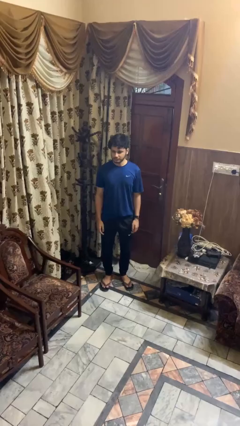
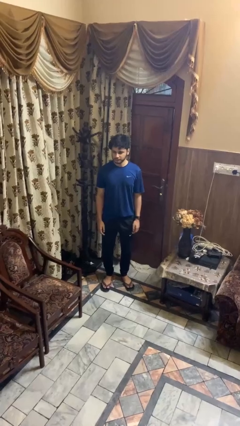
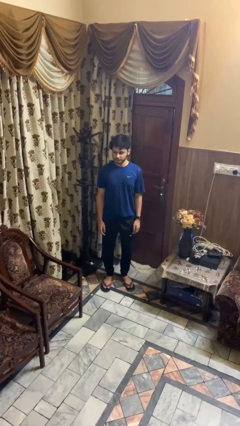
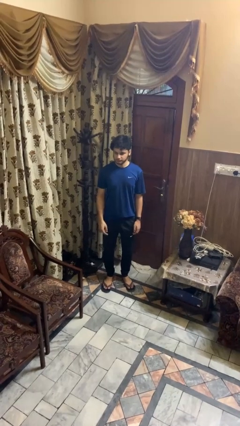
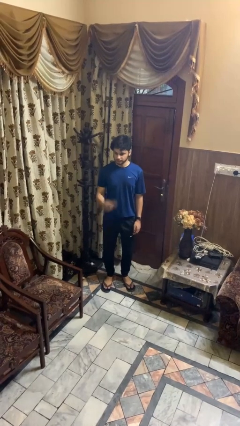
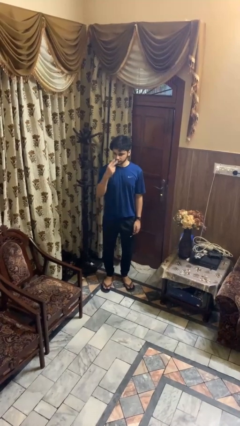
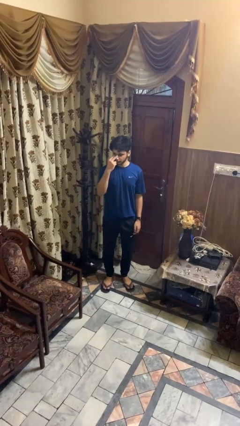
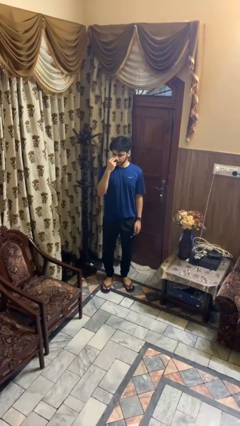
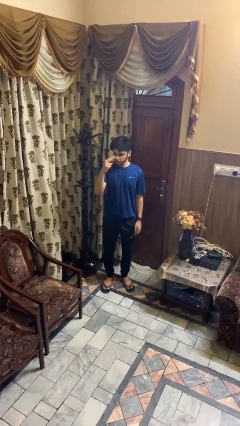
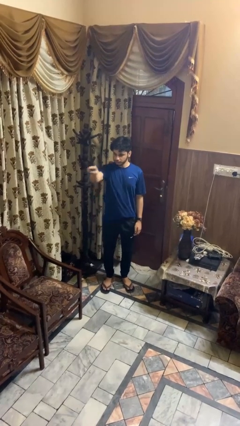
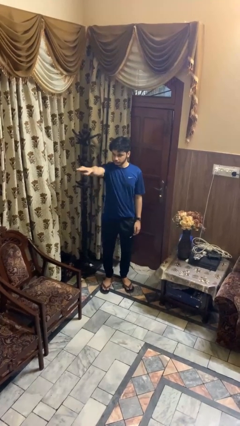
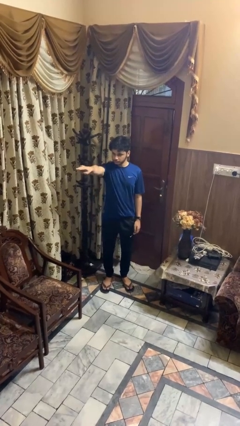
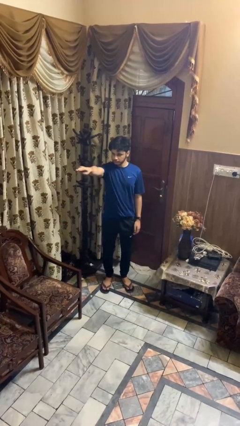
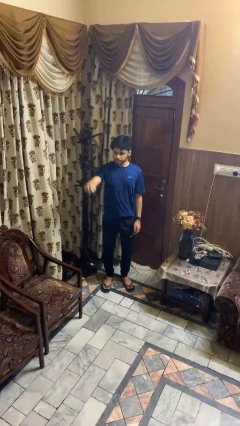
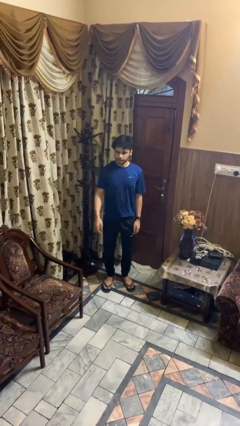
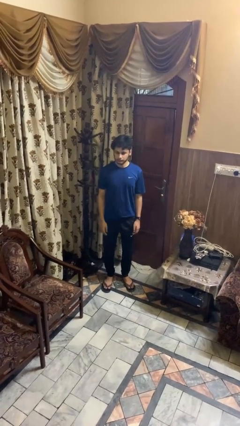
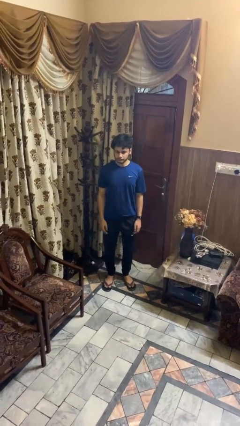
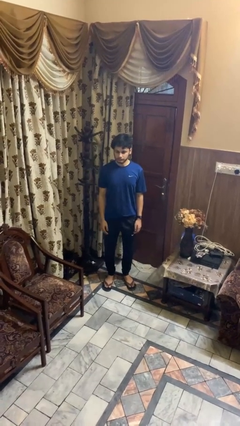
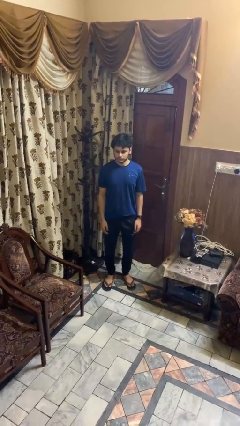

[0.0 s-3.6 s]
person gestures watch closely

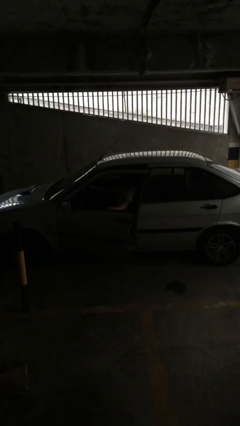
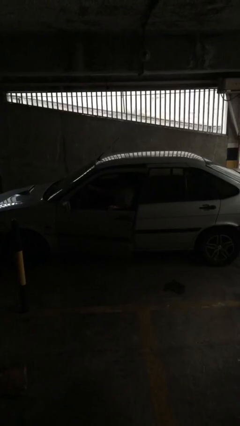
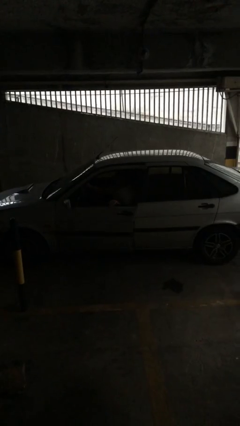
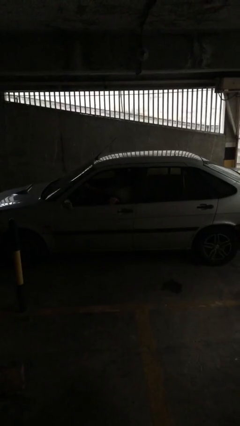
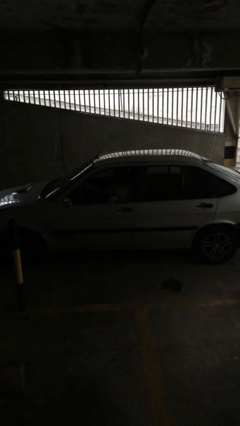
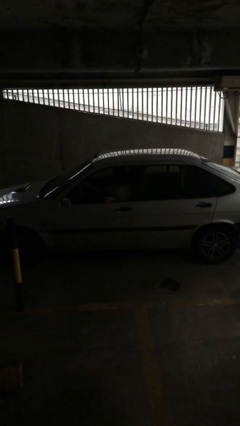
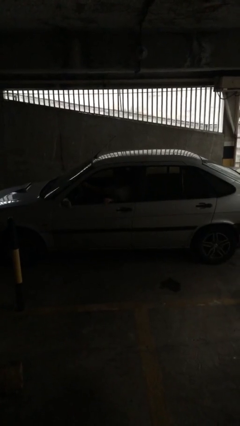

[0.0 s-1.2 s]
person closes car door

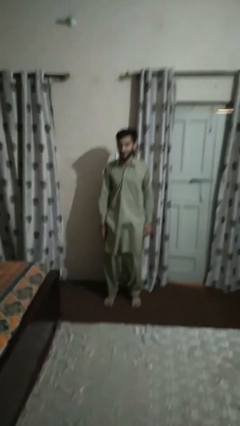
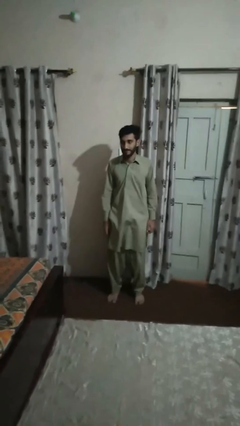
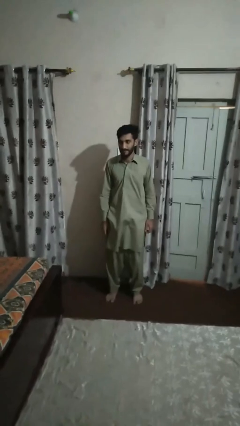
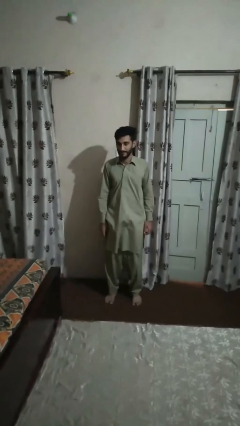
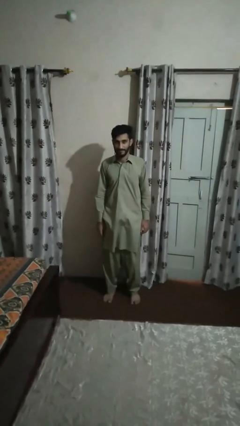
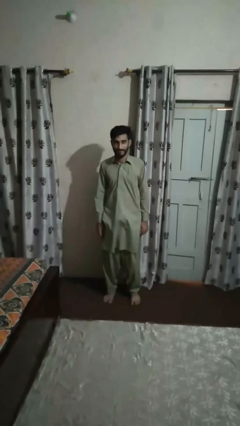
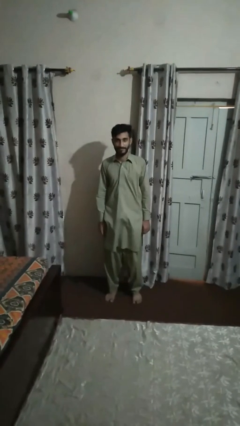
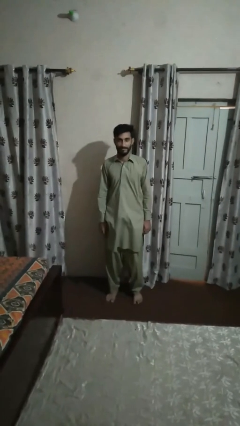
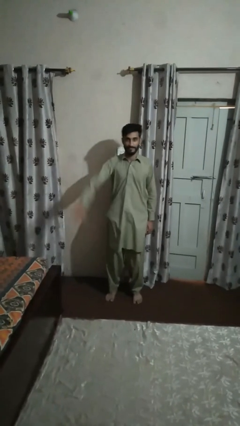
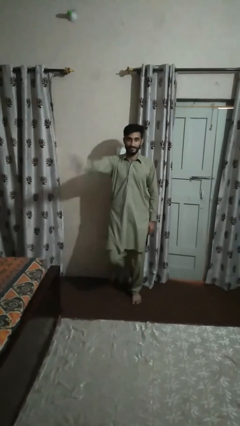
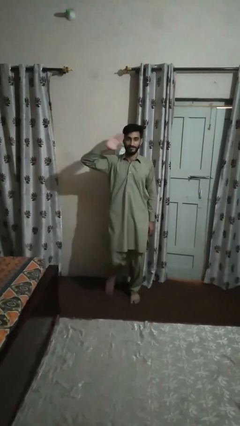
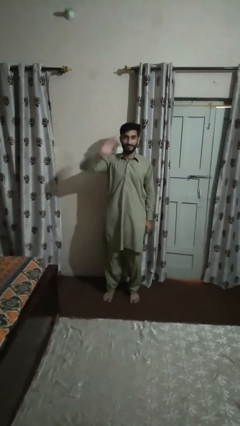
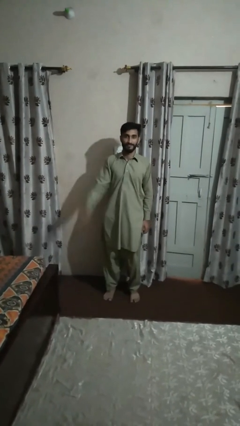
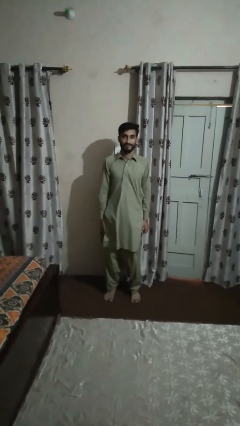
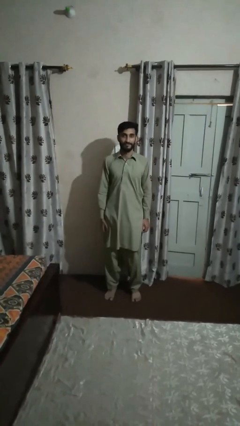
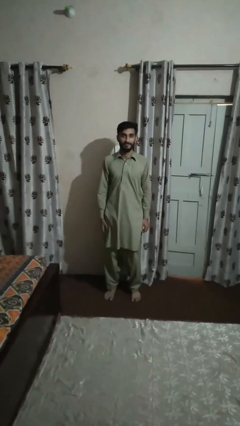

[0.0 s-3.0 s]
person salutes

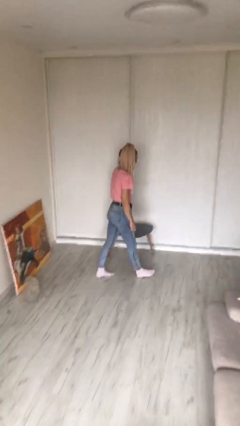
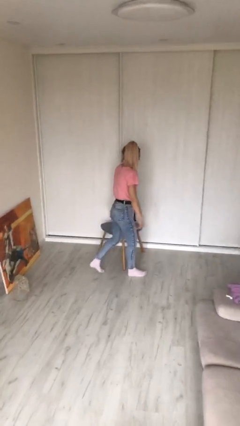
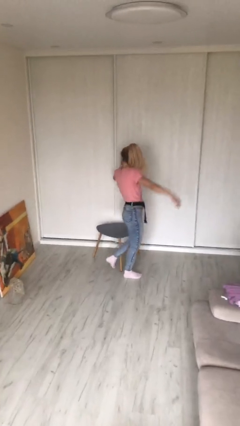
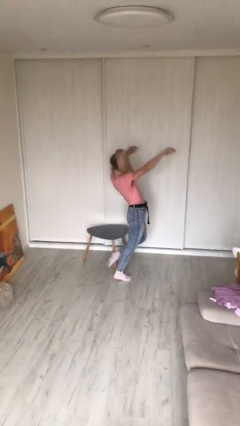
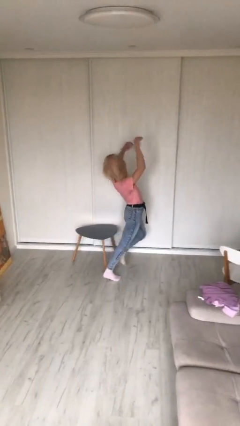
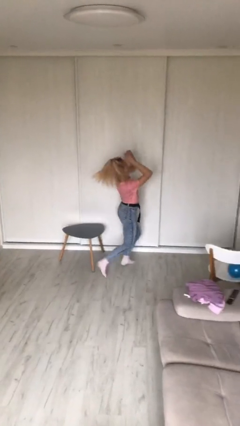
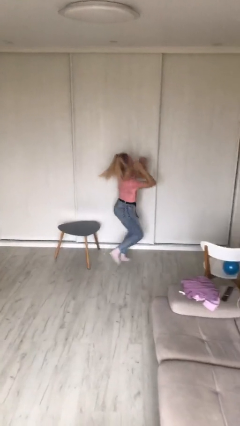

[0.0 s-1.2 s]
person bumps into table

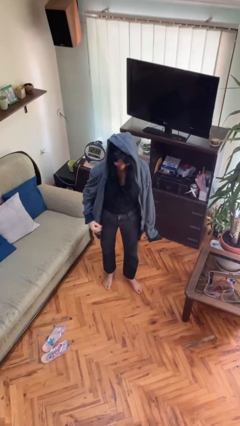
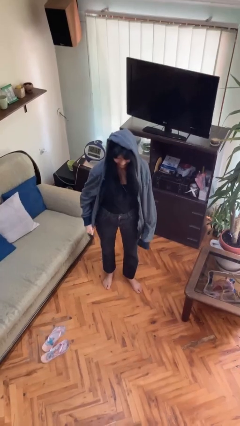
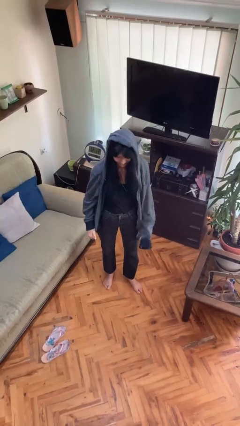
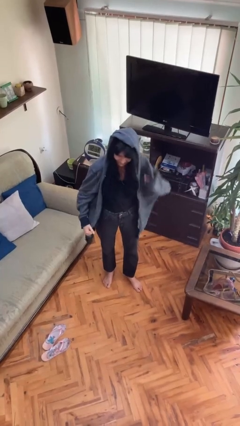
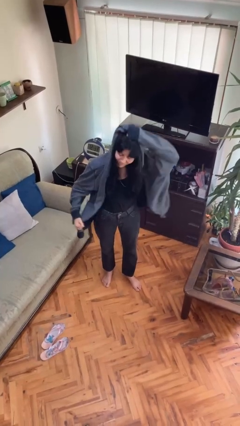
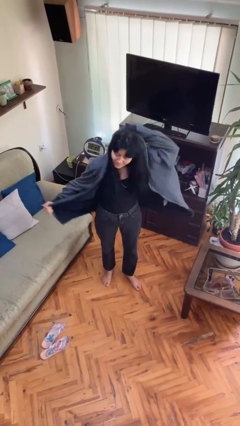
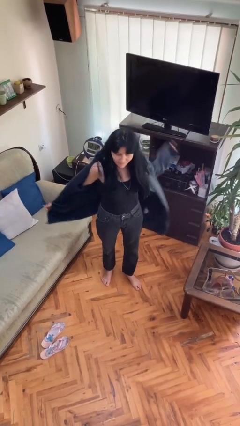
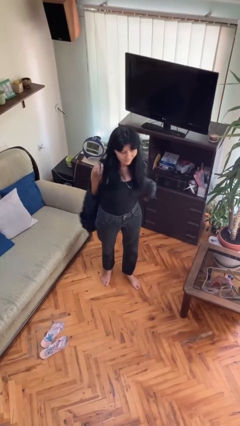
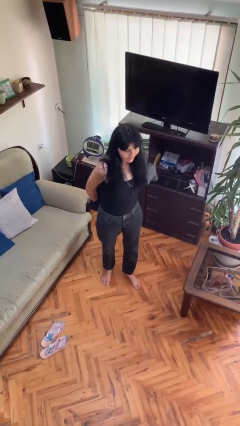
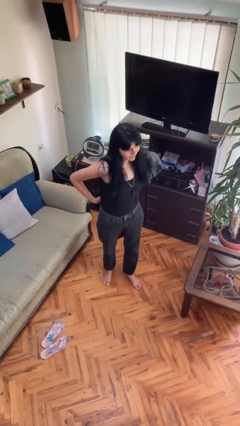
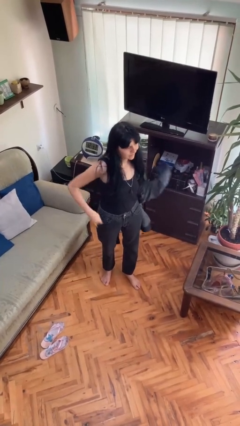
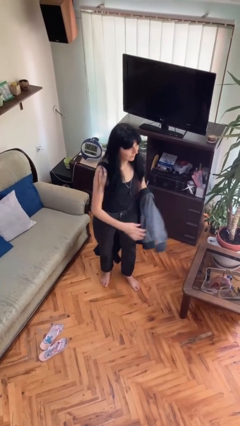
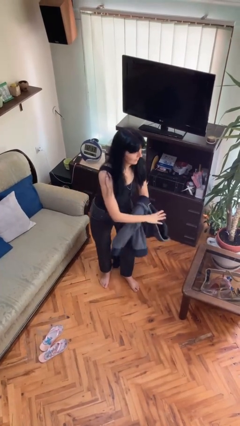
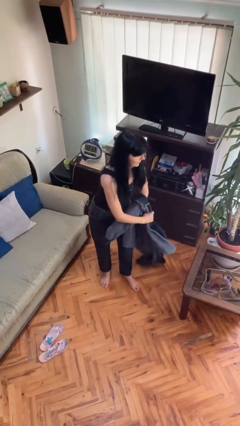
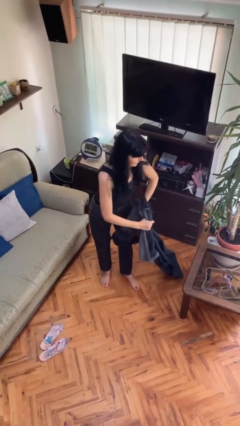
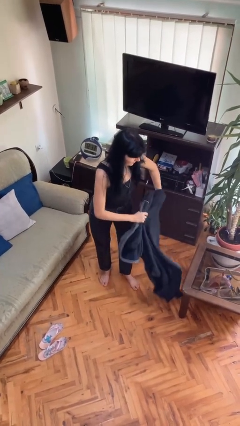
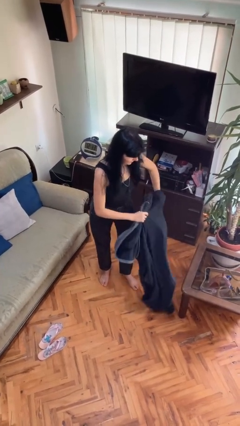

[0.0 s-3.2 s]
person takes off hoodie

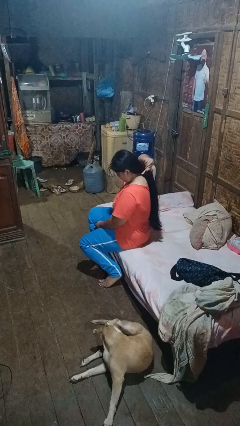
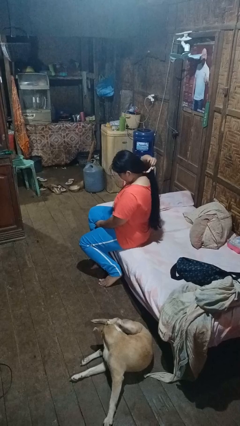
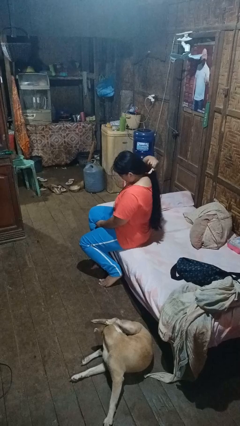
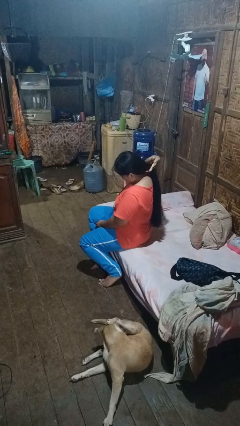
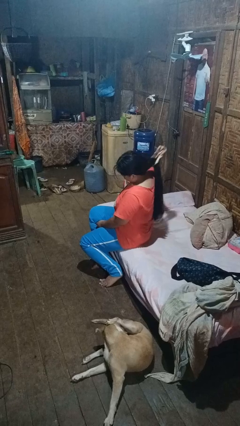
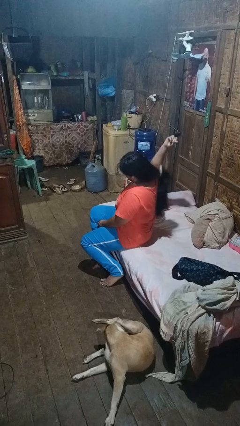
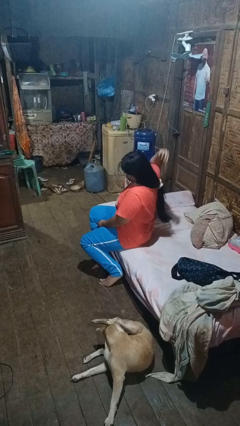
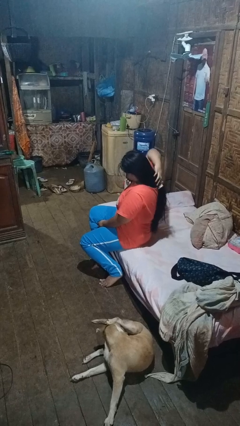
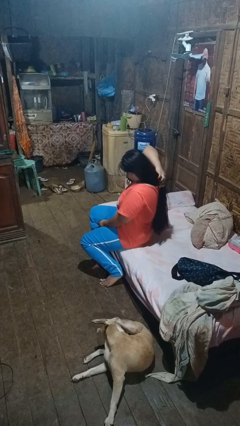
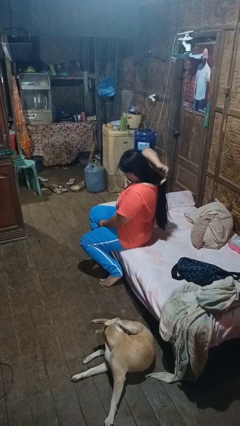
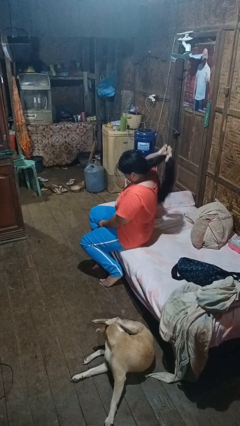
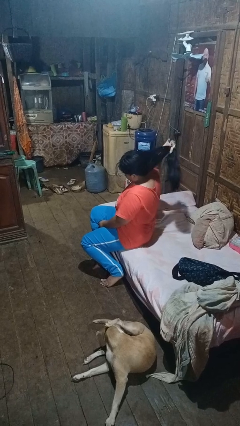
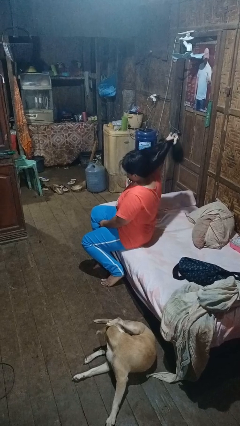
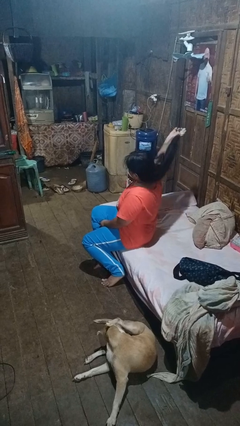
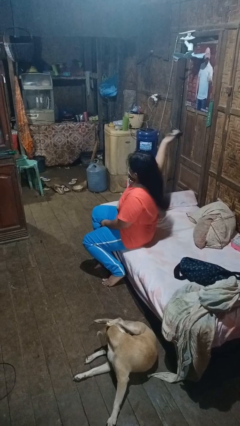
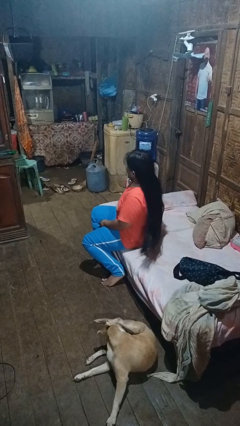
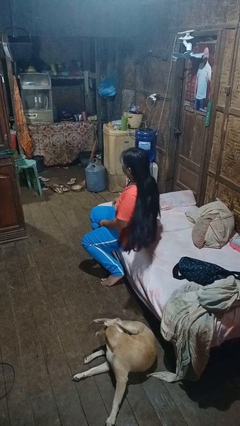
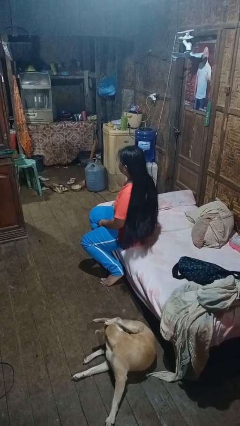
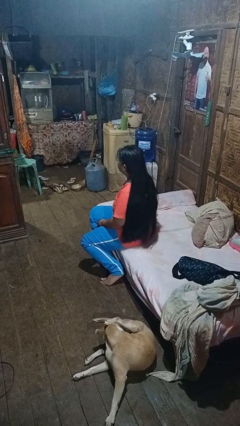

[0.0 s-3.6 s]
person takes off hairtie

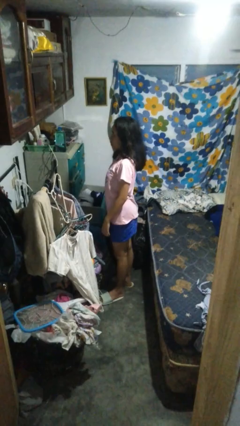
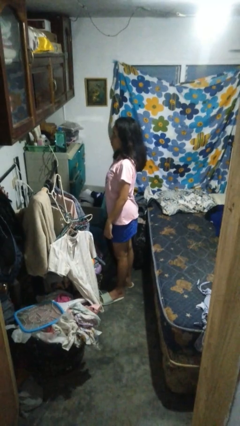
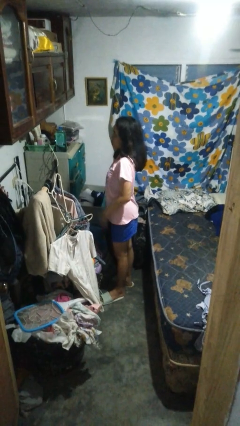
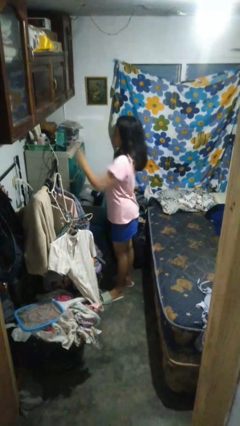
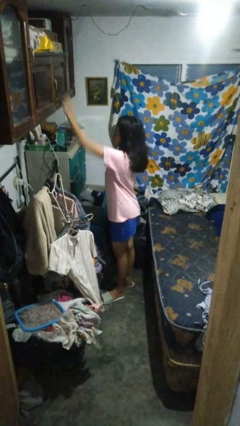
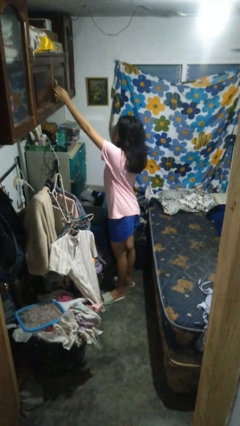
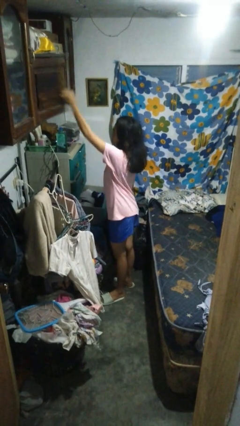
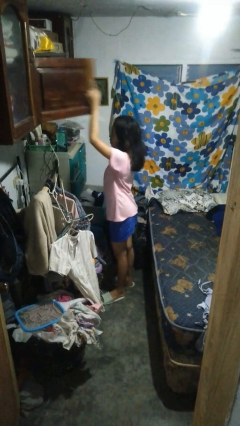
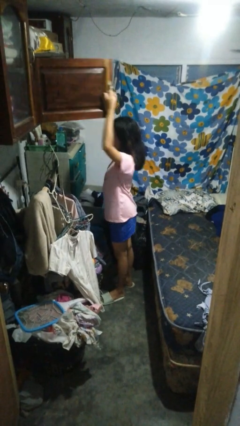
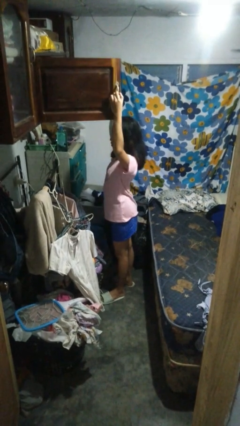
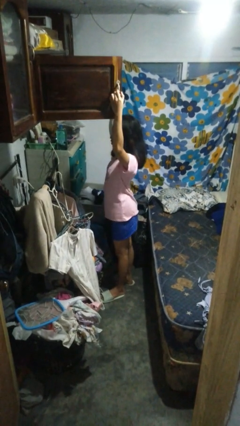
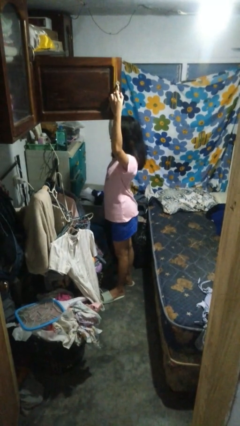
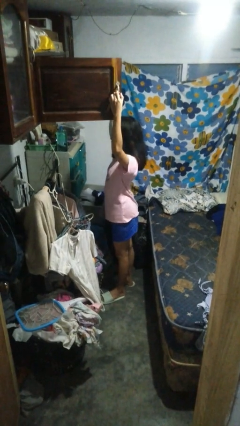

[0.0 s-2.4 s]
person opens closet door
